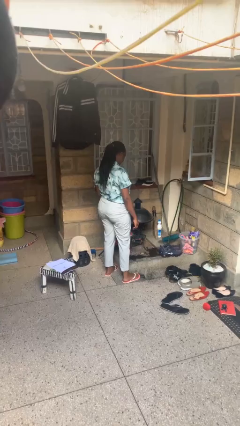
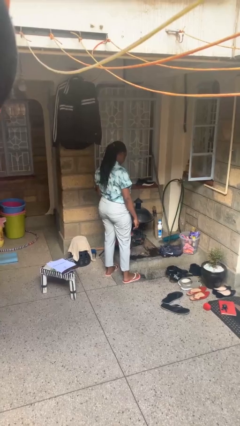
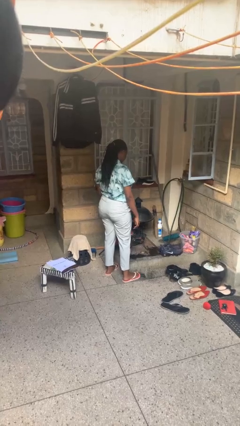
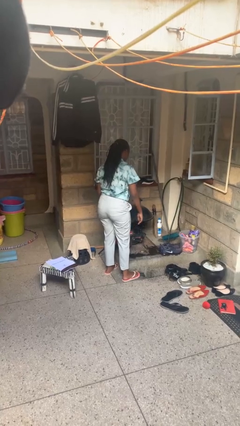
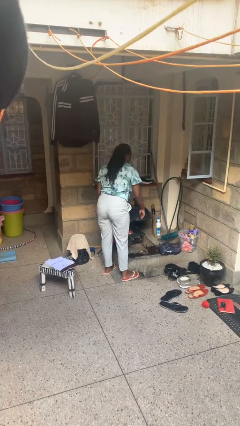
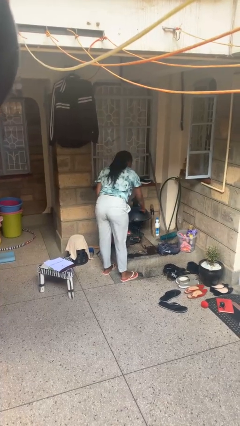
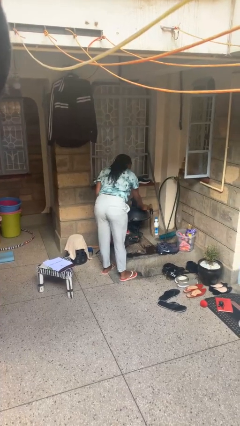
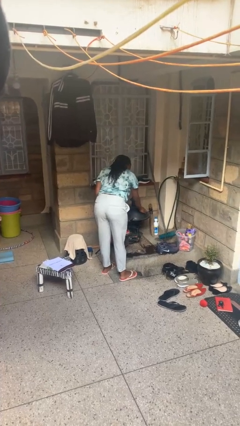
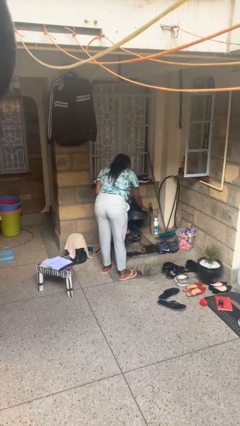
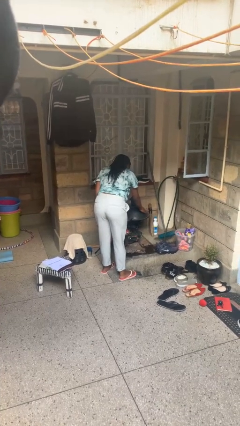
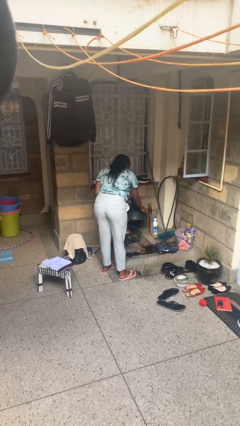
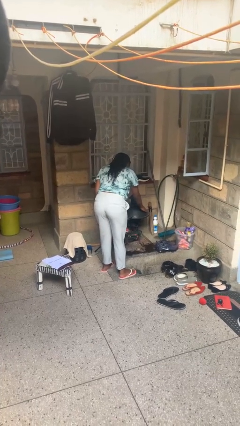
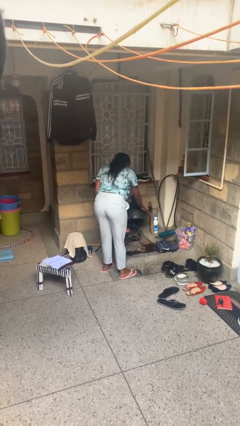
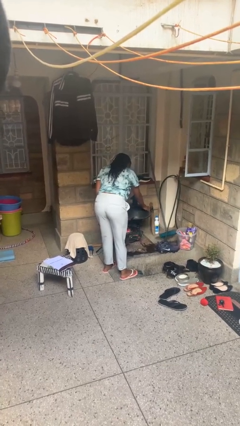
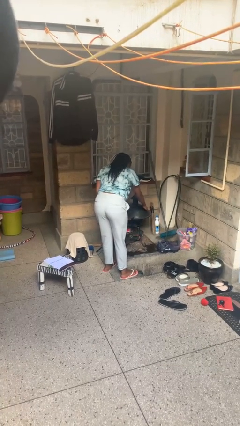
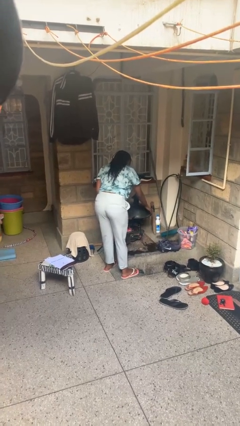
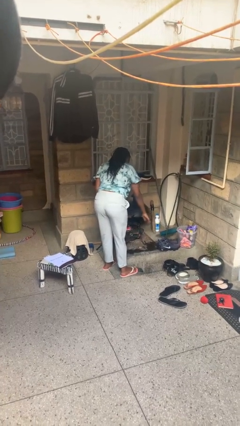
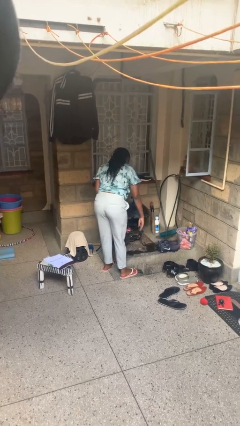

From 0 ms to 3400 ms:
person taps object with finger

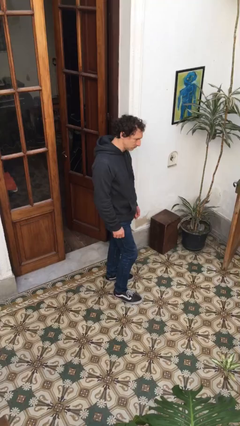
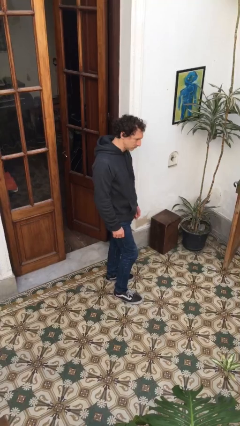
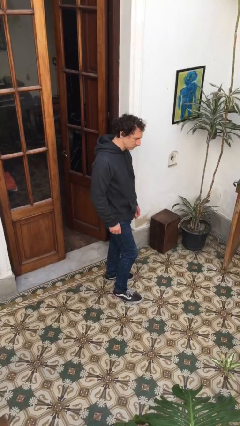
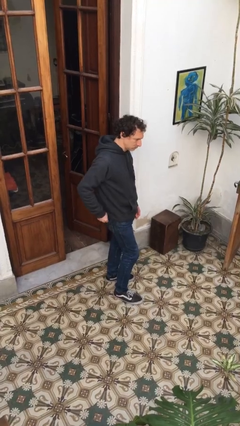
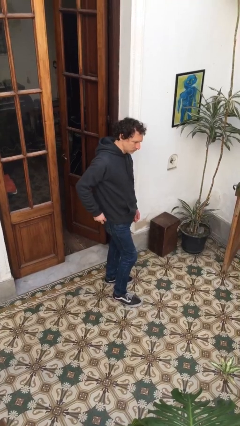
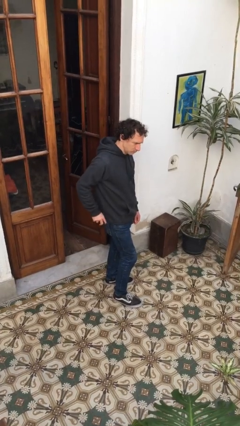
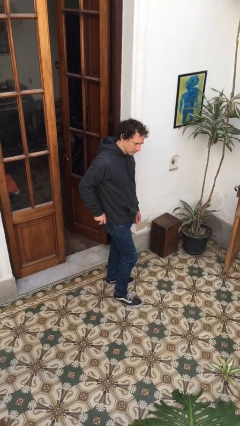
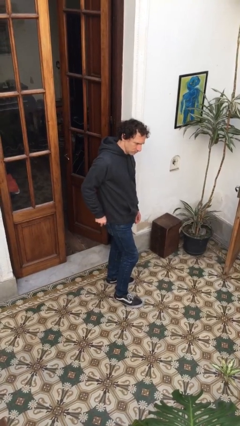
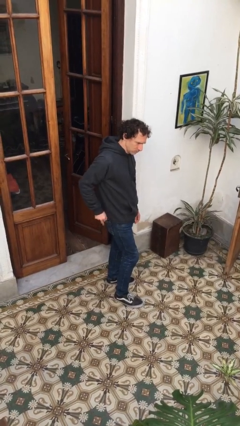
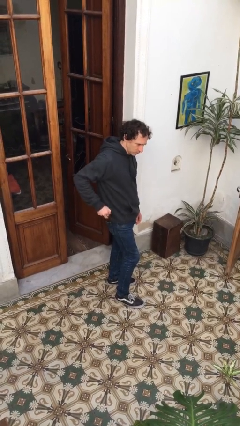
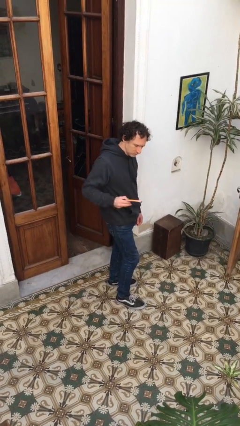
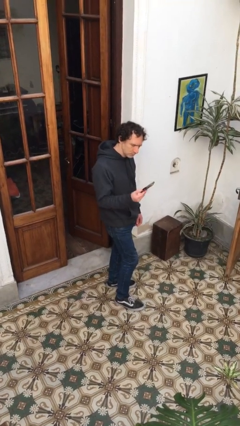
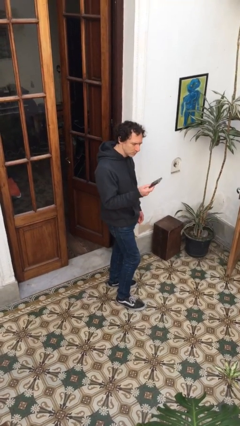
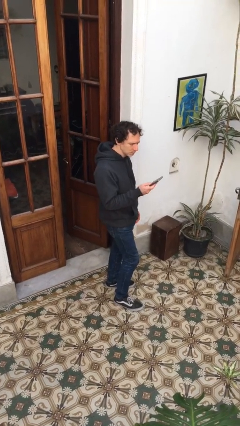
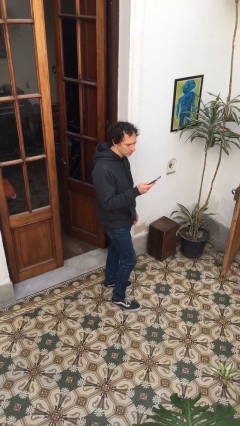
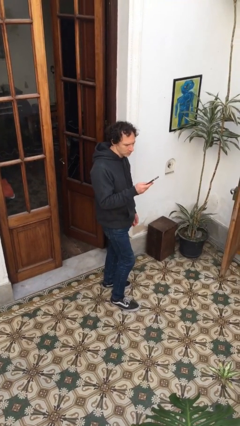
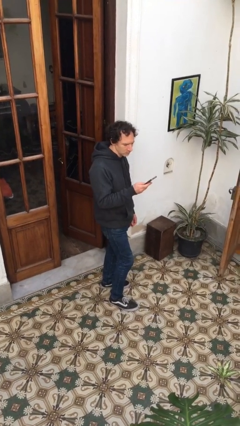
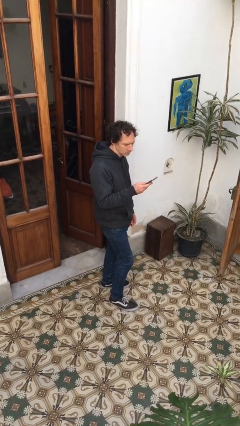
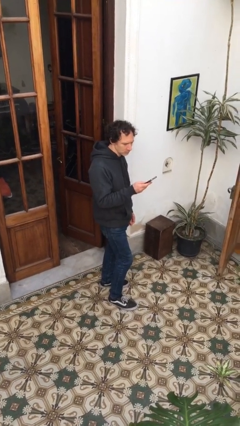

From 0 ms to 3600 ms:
person takes phone from pocket

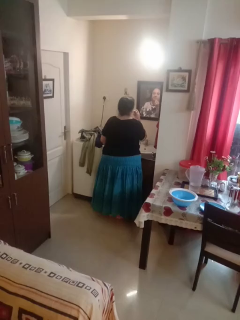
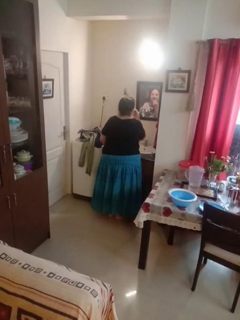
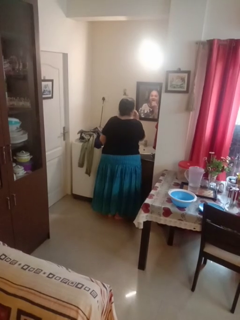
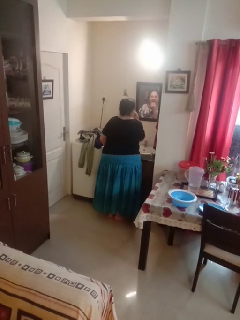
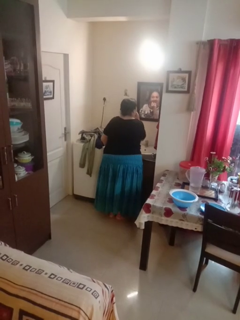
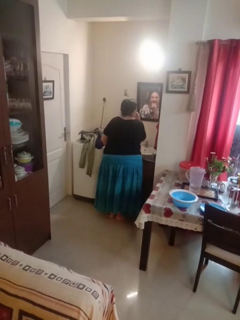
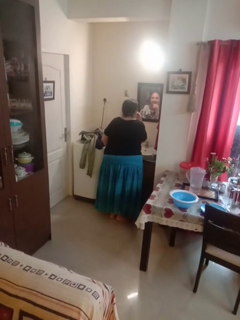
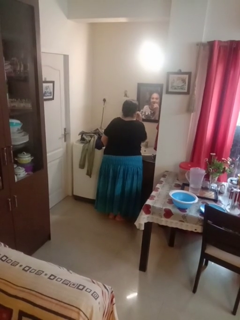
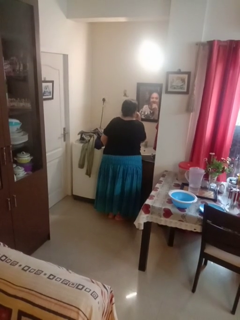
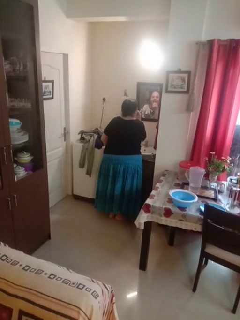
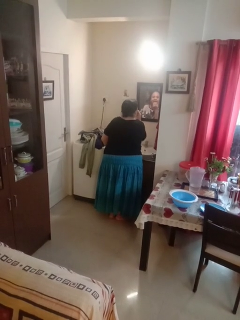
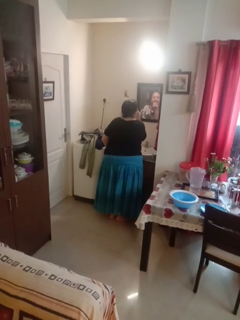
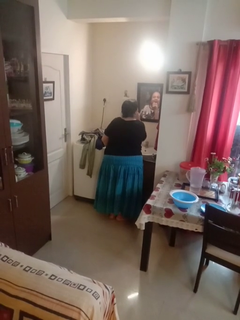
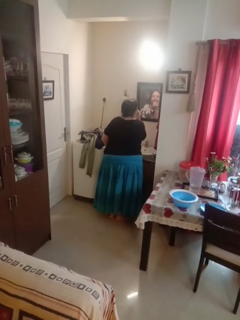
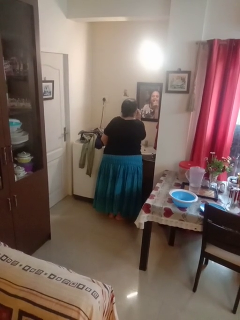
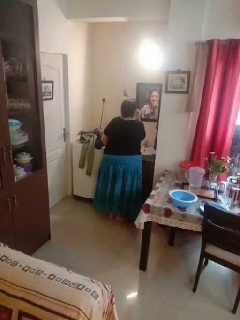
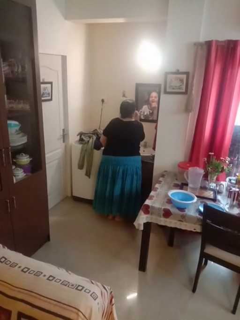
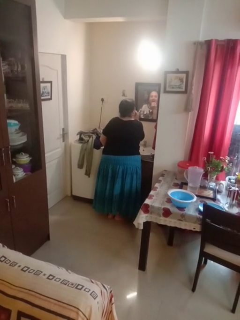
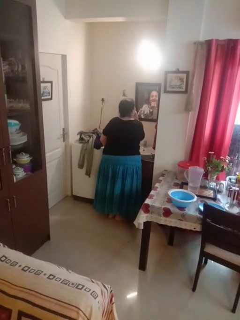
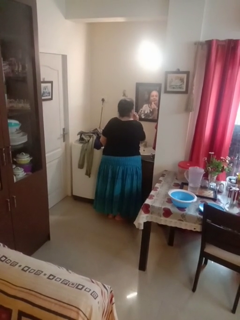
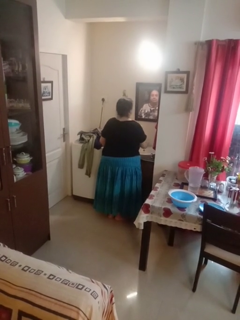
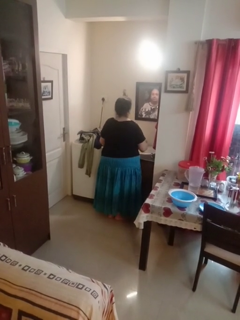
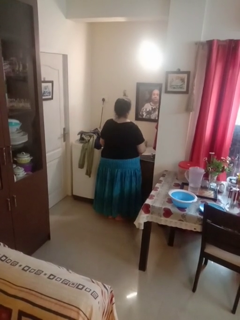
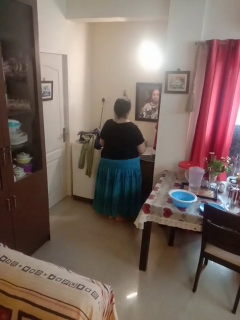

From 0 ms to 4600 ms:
person applies lip makeup

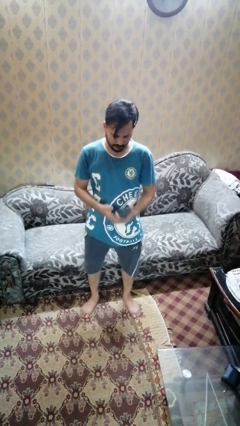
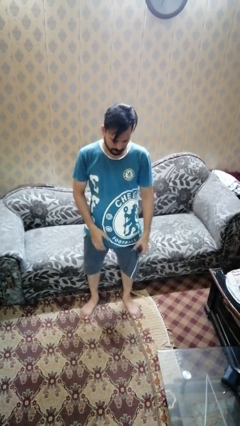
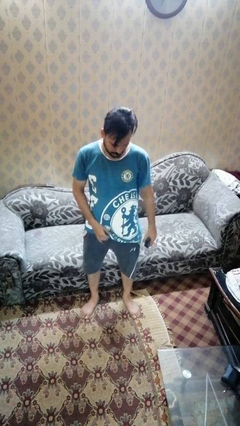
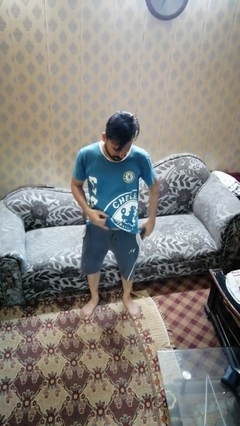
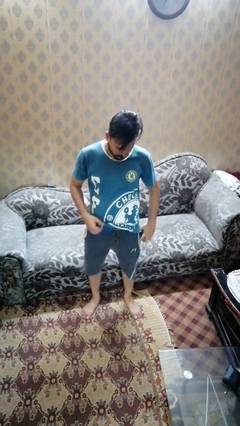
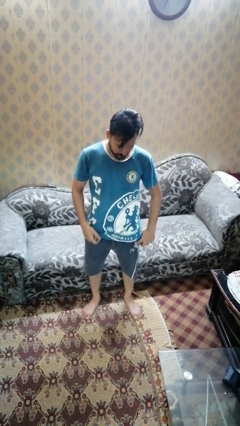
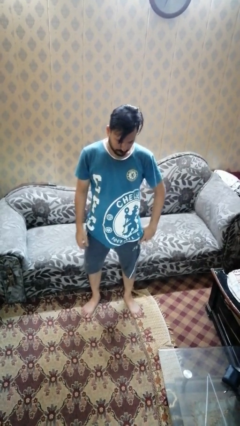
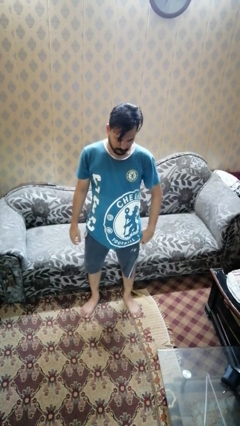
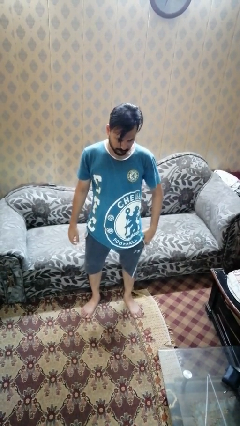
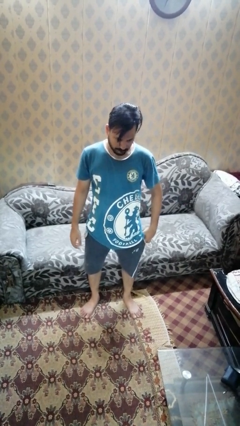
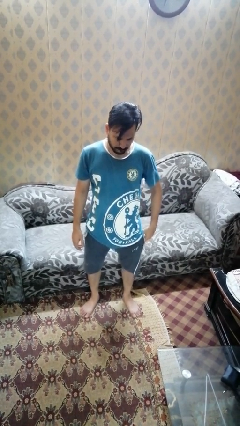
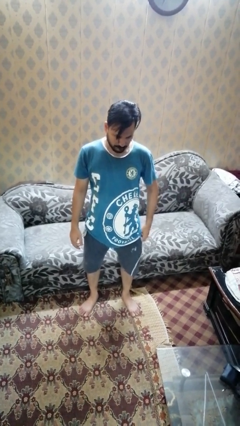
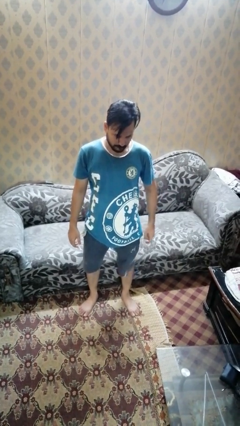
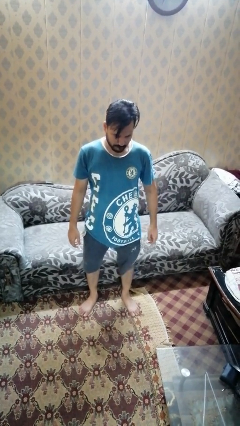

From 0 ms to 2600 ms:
person puts phone into pocket

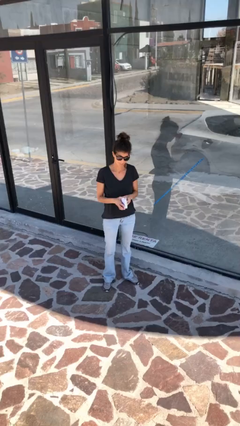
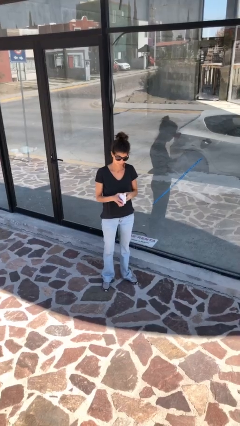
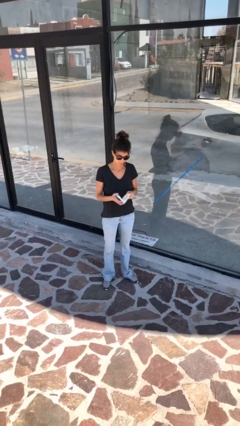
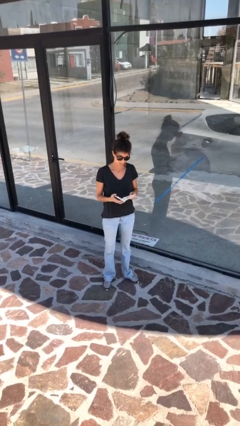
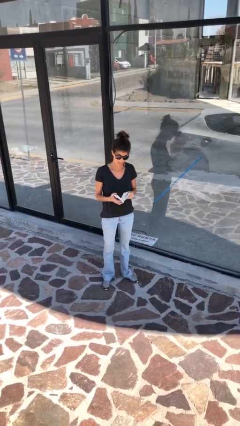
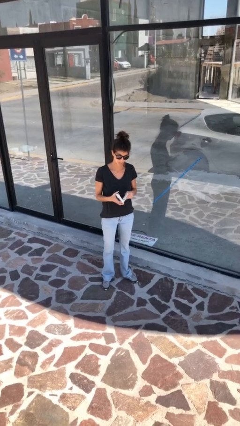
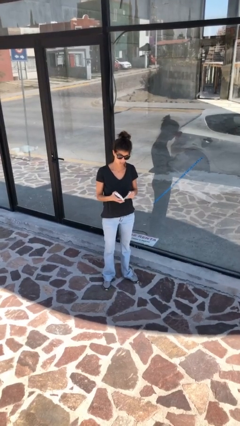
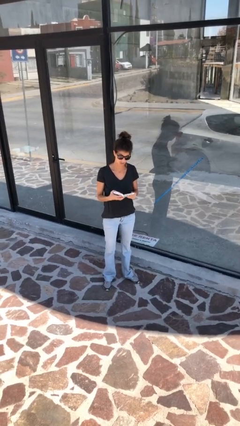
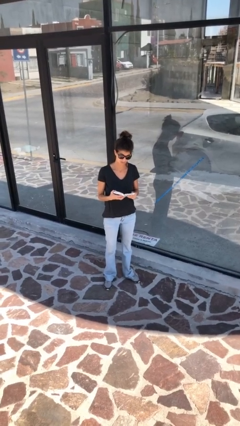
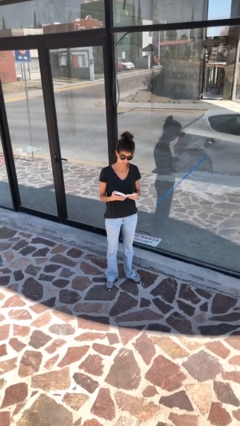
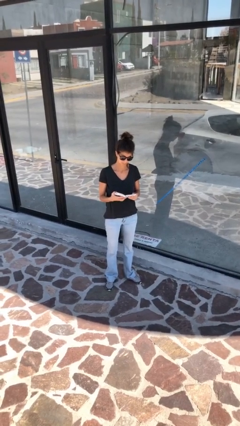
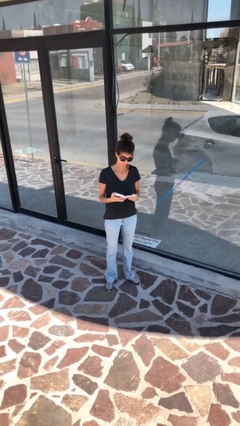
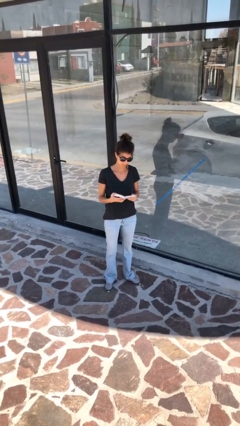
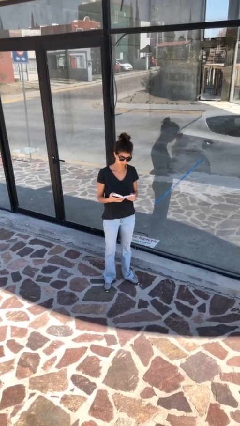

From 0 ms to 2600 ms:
person reads document

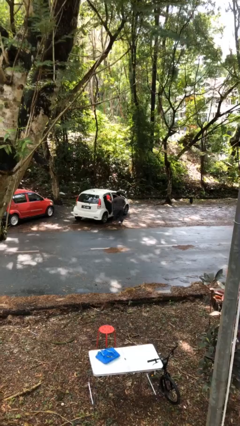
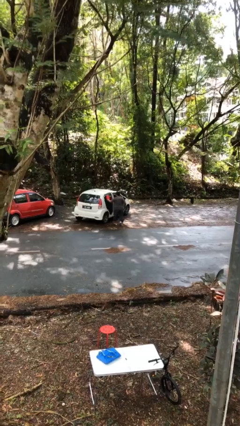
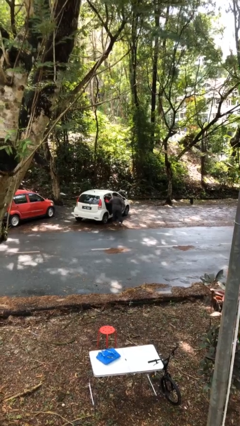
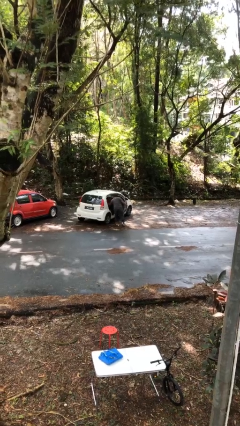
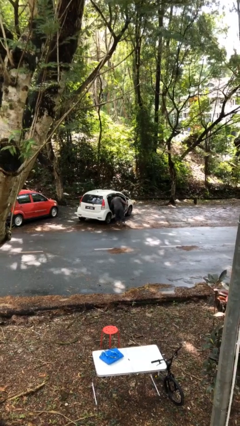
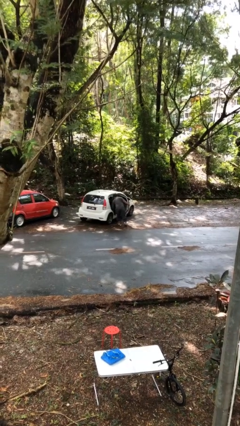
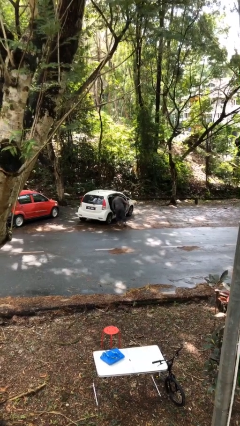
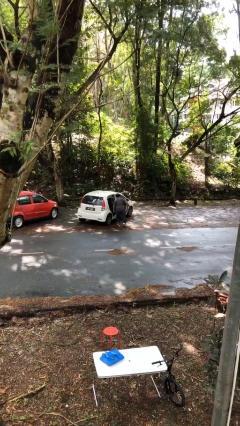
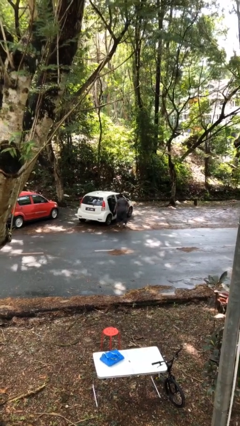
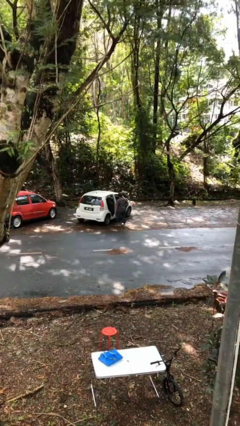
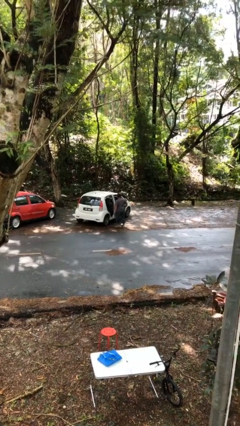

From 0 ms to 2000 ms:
person loads car
